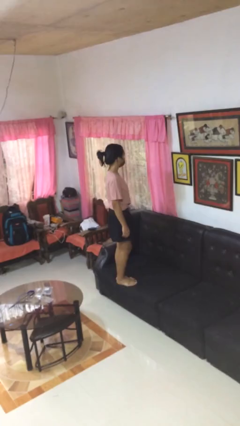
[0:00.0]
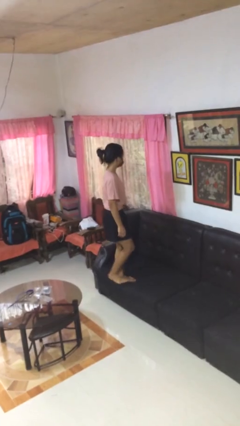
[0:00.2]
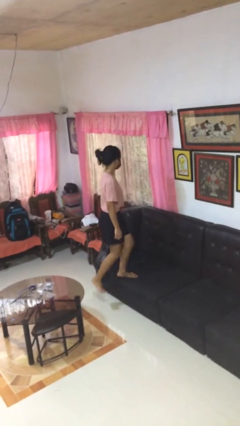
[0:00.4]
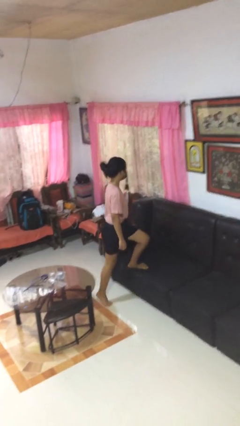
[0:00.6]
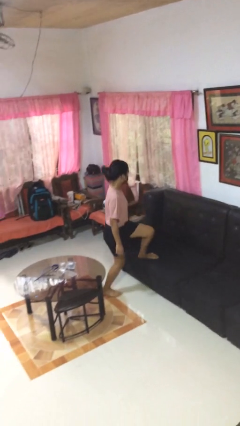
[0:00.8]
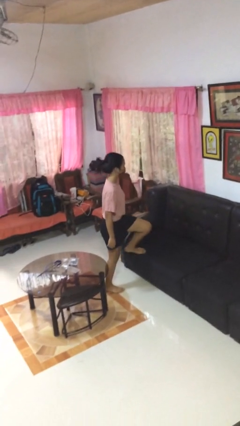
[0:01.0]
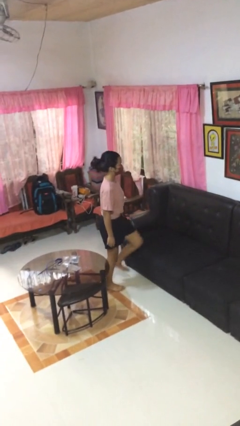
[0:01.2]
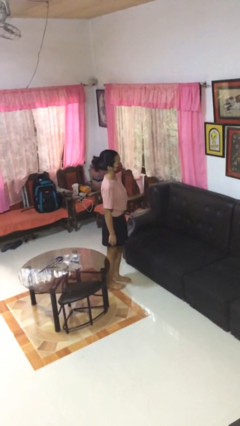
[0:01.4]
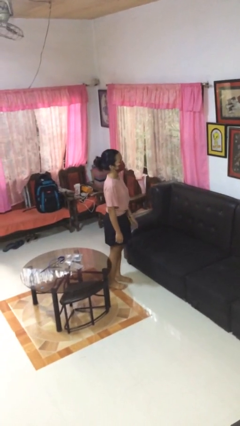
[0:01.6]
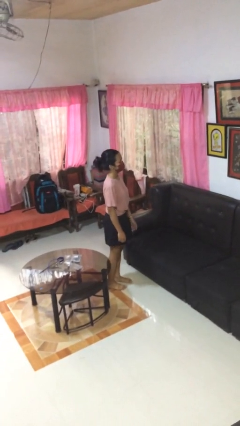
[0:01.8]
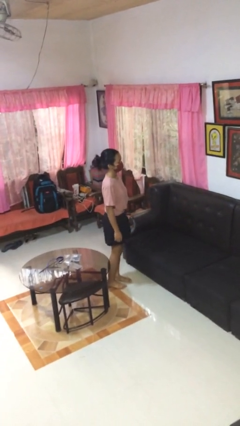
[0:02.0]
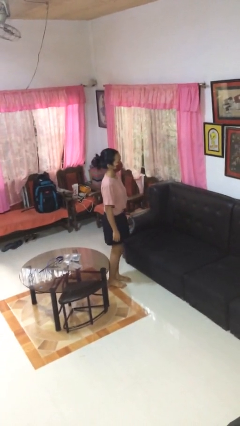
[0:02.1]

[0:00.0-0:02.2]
person climbs off couch

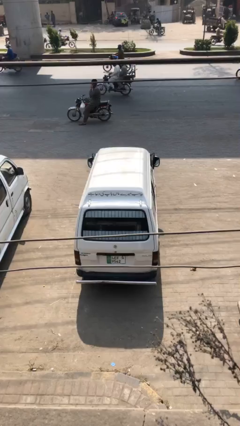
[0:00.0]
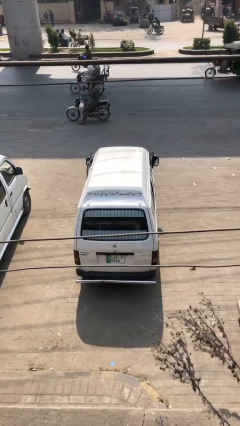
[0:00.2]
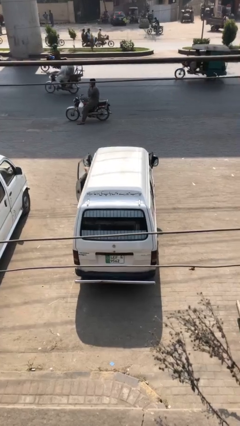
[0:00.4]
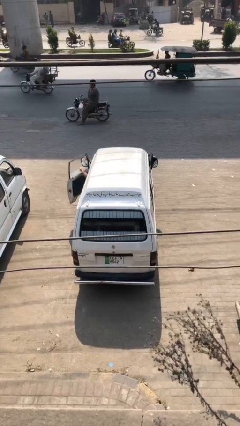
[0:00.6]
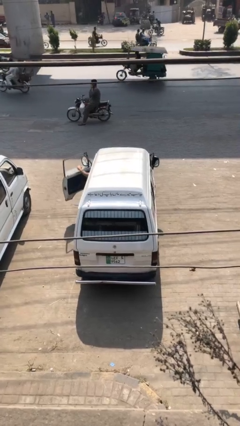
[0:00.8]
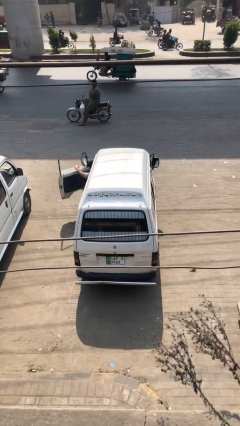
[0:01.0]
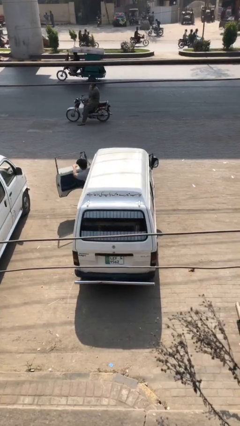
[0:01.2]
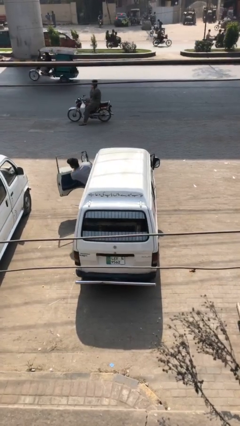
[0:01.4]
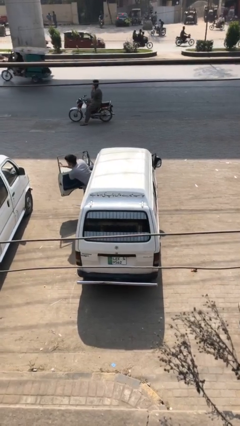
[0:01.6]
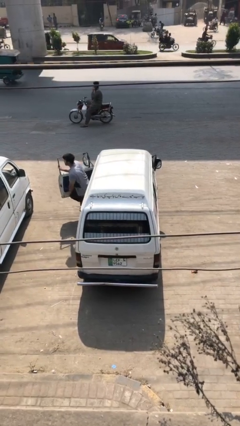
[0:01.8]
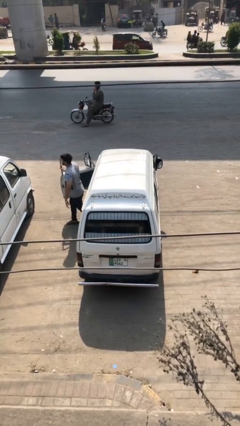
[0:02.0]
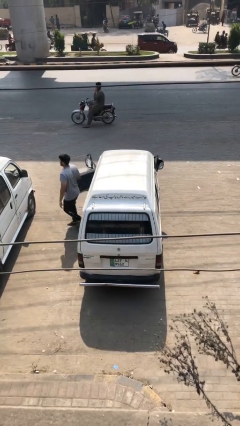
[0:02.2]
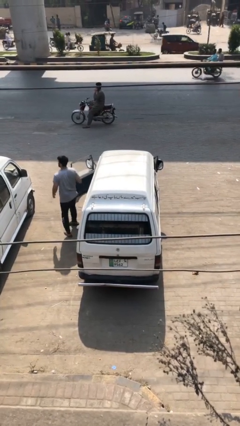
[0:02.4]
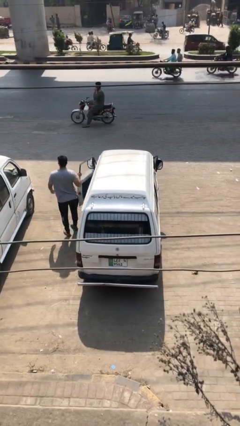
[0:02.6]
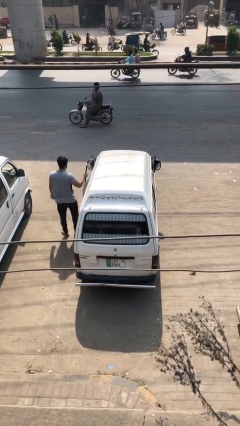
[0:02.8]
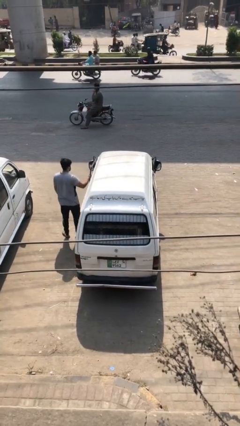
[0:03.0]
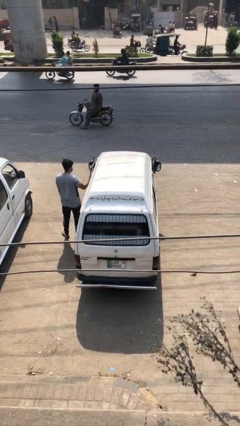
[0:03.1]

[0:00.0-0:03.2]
car drops off person

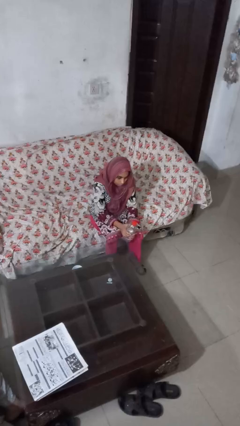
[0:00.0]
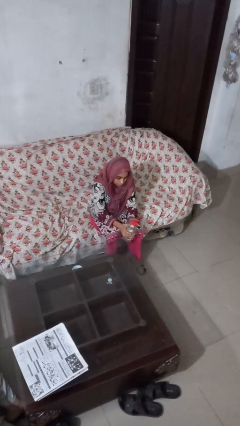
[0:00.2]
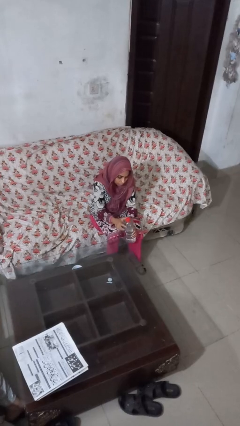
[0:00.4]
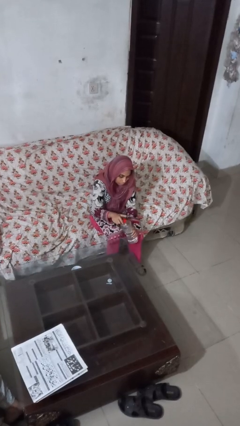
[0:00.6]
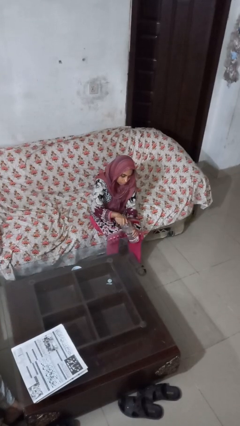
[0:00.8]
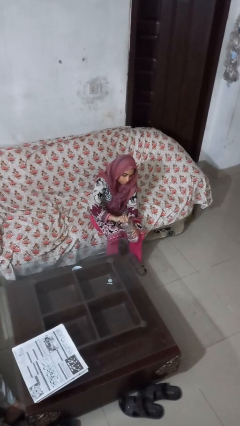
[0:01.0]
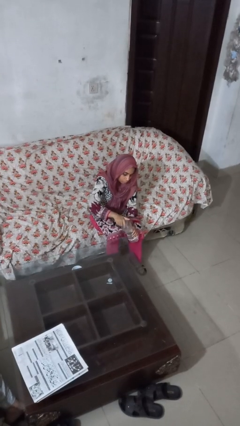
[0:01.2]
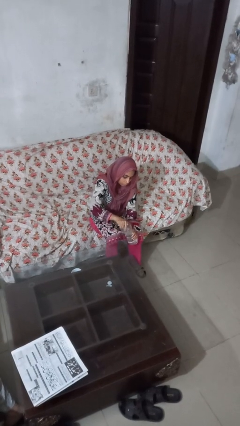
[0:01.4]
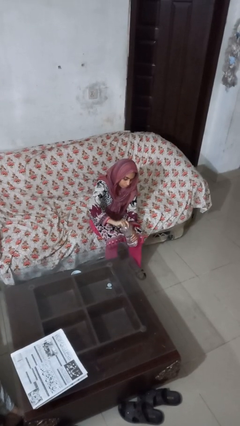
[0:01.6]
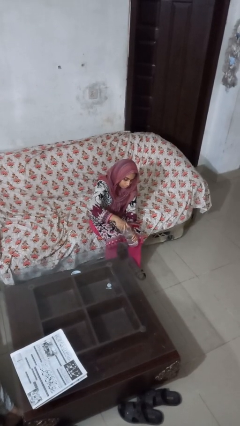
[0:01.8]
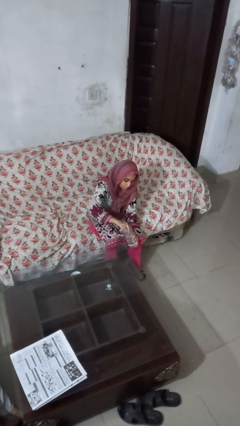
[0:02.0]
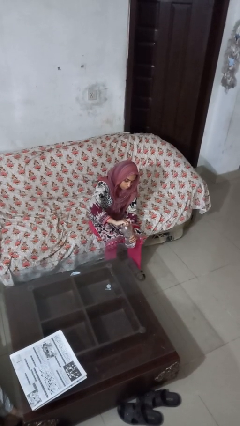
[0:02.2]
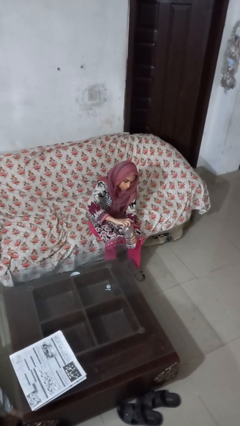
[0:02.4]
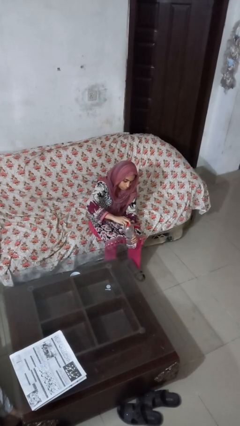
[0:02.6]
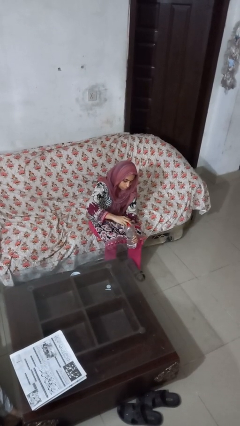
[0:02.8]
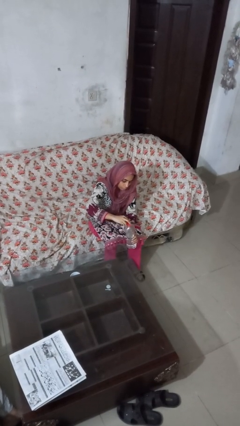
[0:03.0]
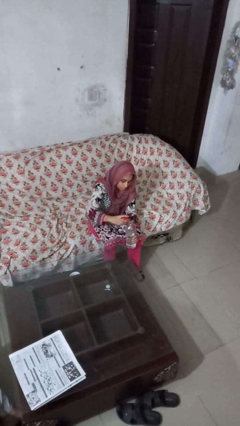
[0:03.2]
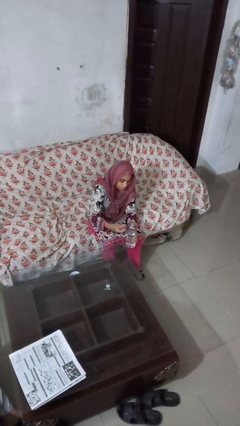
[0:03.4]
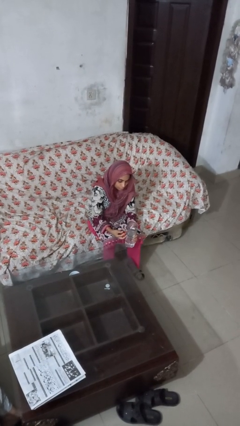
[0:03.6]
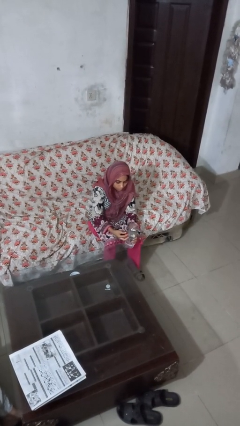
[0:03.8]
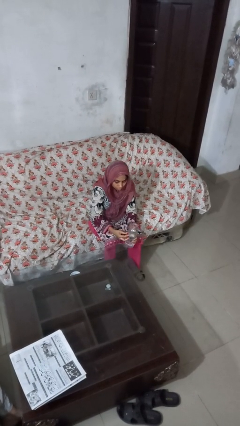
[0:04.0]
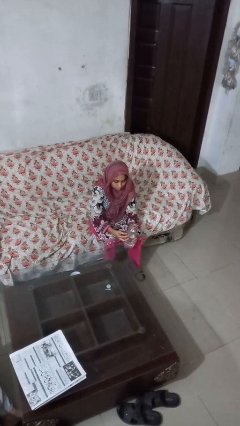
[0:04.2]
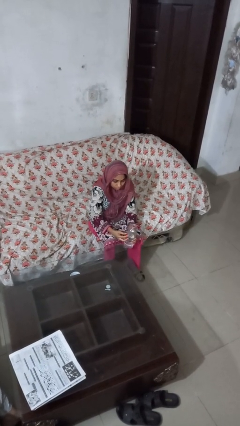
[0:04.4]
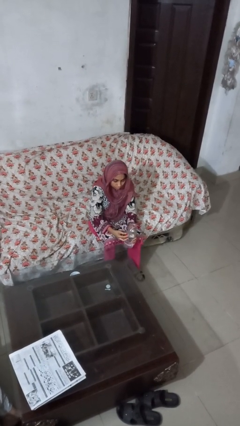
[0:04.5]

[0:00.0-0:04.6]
person unscrews lid from bottle

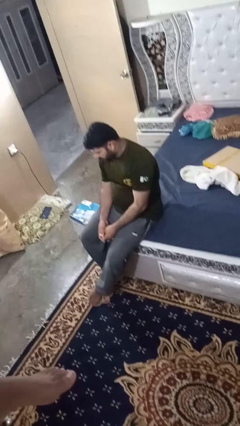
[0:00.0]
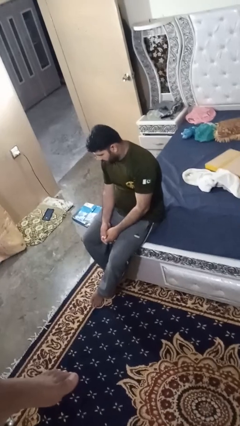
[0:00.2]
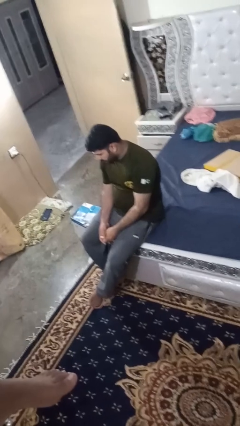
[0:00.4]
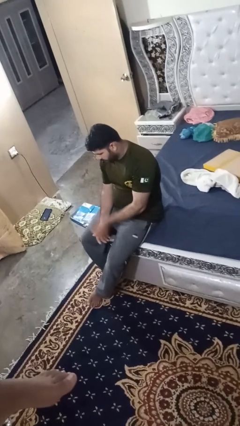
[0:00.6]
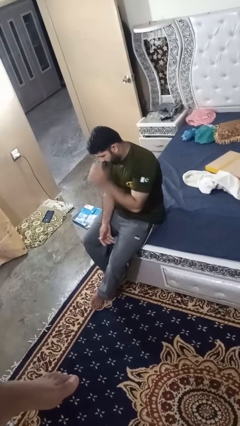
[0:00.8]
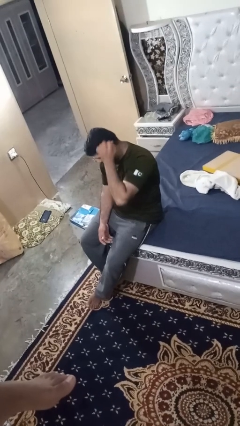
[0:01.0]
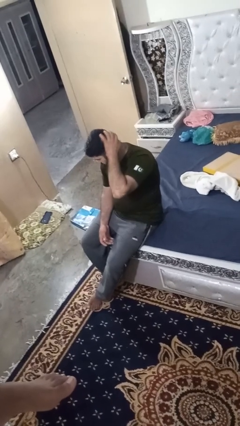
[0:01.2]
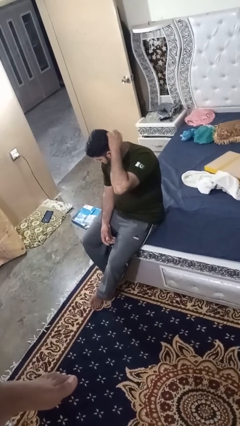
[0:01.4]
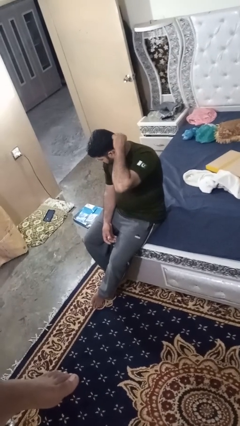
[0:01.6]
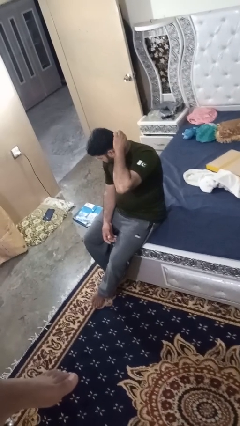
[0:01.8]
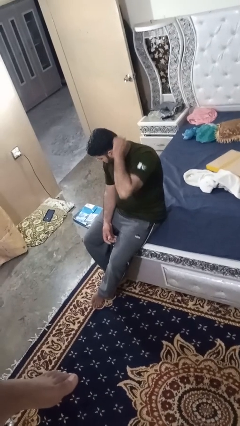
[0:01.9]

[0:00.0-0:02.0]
person strokes hair

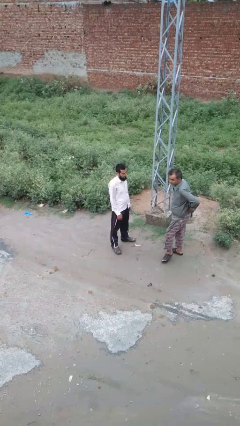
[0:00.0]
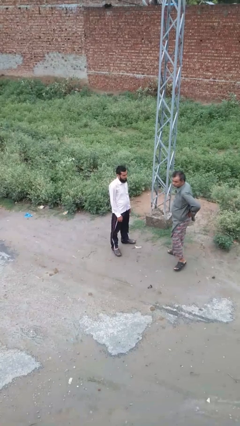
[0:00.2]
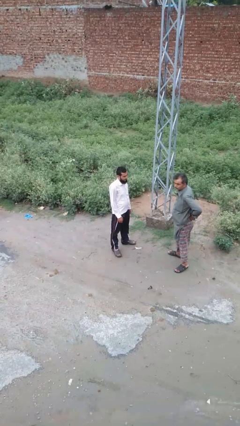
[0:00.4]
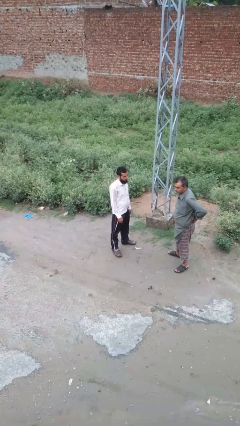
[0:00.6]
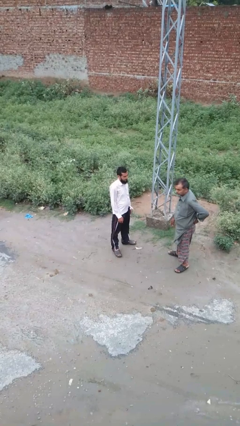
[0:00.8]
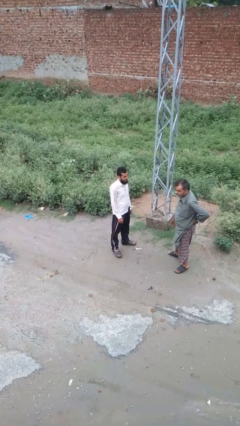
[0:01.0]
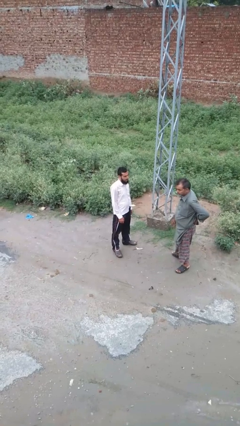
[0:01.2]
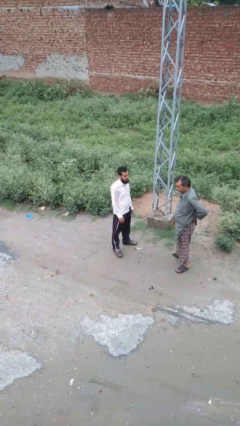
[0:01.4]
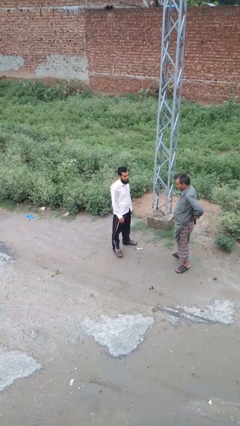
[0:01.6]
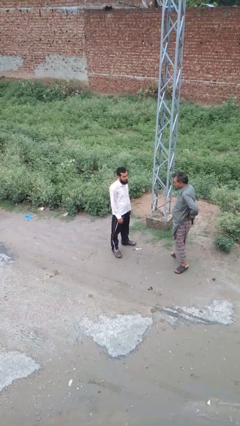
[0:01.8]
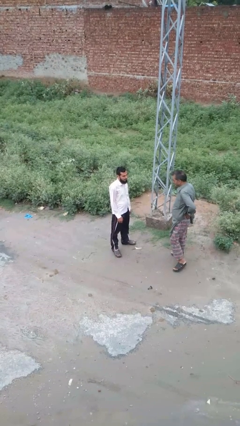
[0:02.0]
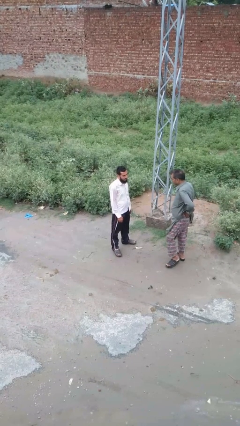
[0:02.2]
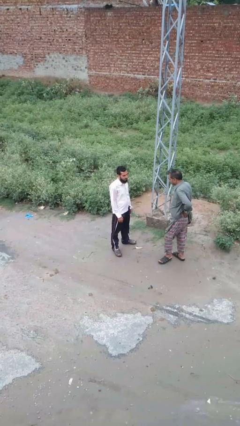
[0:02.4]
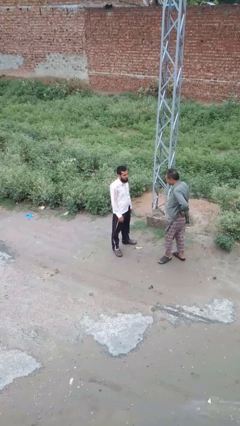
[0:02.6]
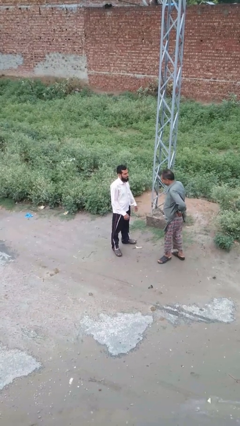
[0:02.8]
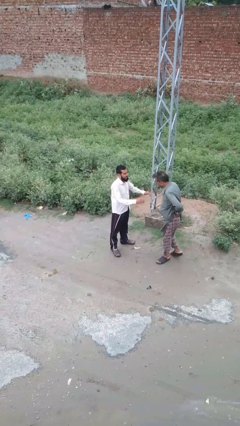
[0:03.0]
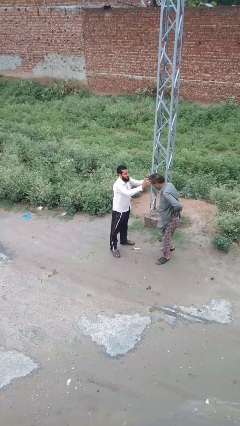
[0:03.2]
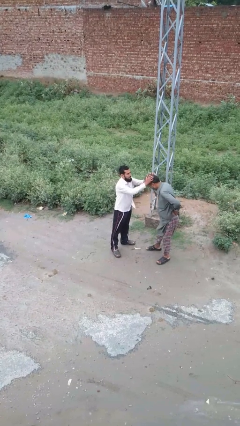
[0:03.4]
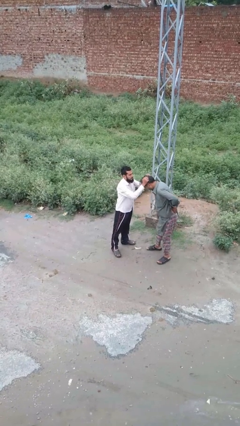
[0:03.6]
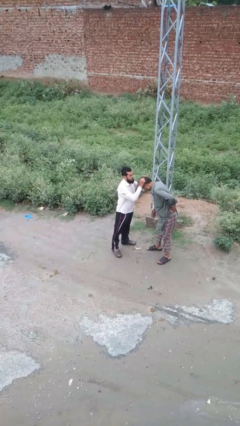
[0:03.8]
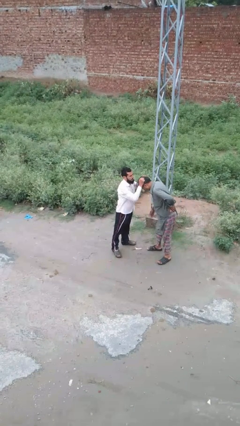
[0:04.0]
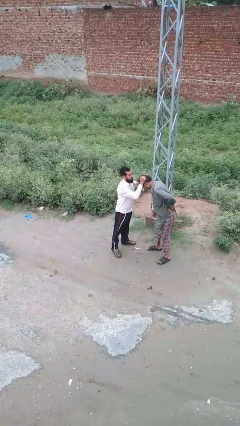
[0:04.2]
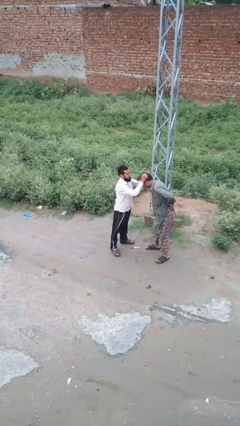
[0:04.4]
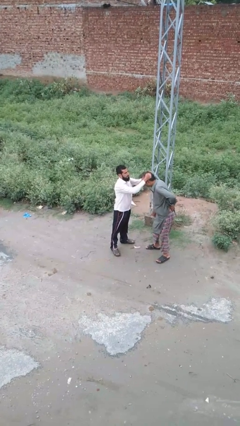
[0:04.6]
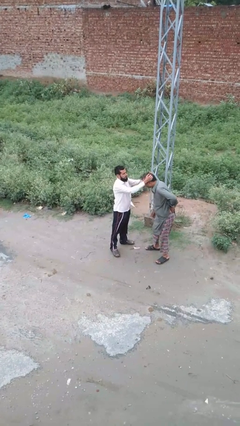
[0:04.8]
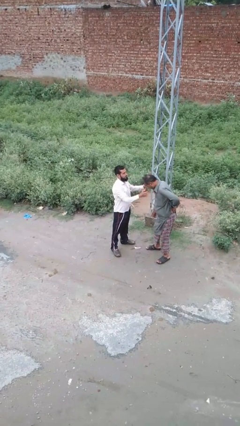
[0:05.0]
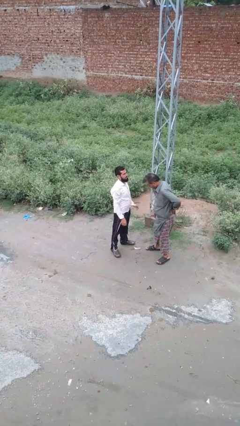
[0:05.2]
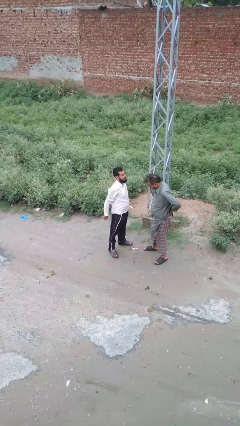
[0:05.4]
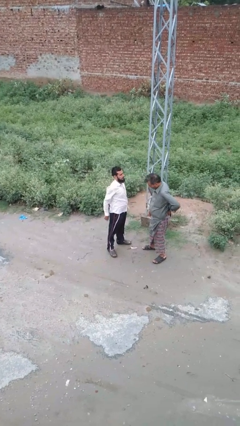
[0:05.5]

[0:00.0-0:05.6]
person grabs person by hair
